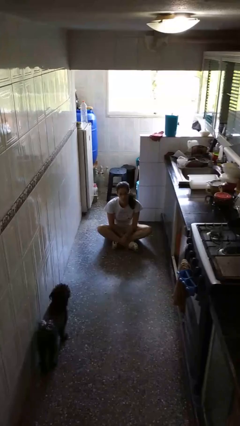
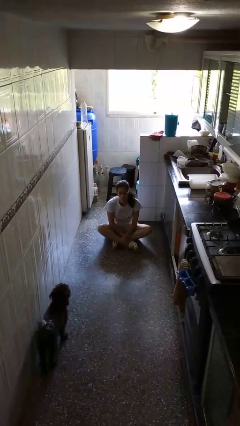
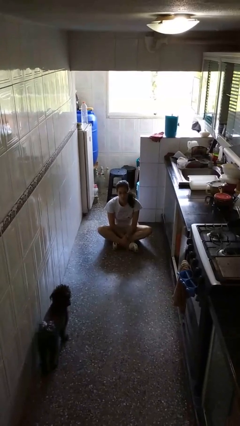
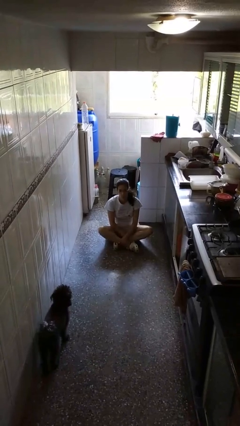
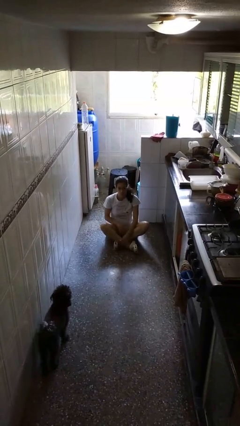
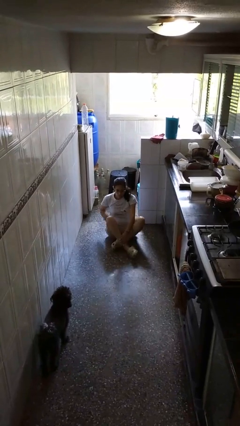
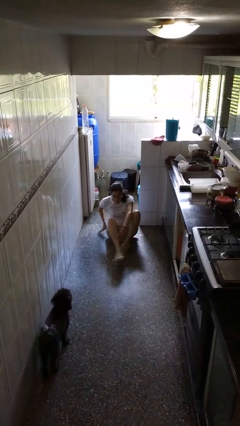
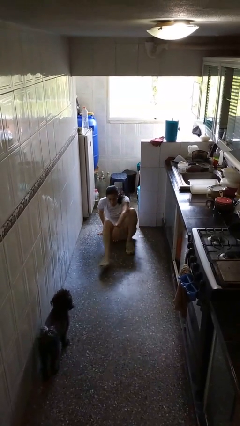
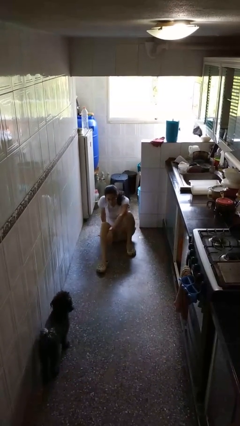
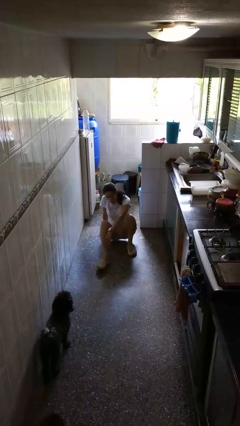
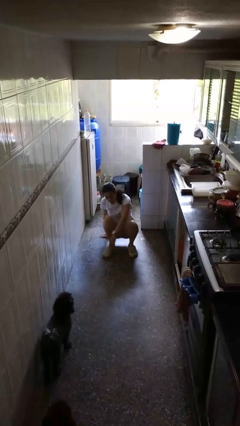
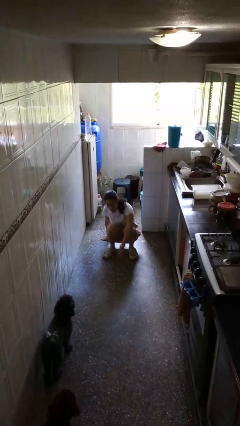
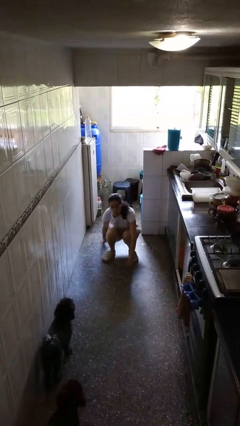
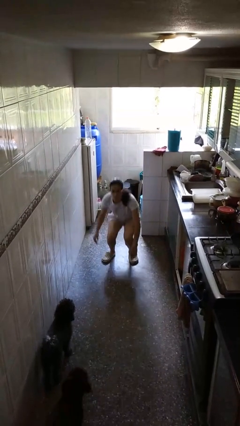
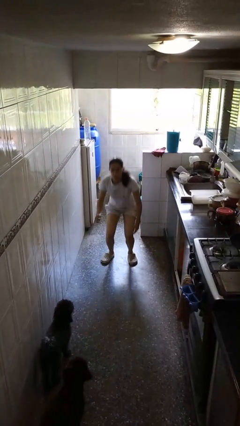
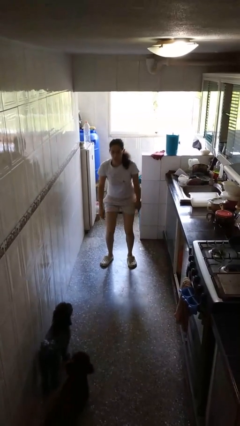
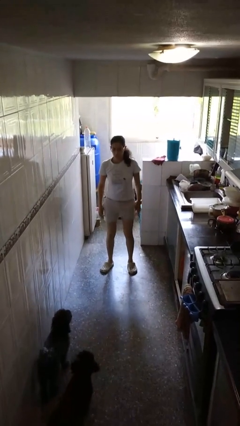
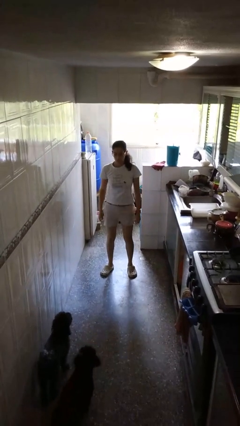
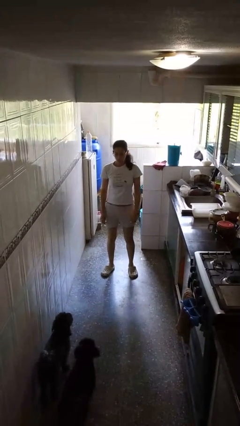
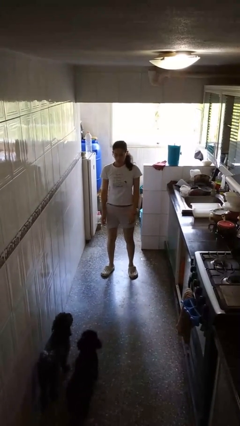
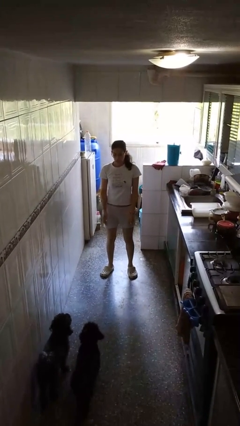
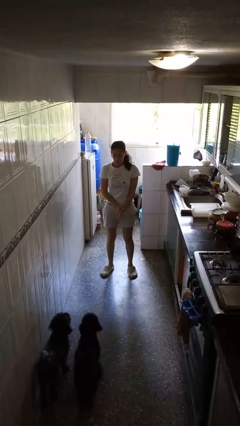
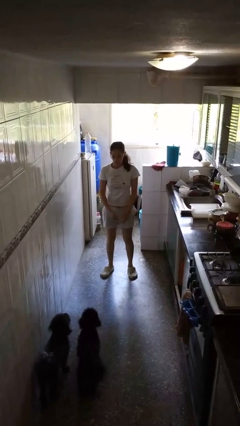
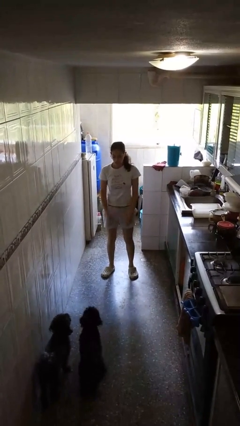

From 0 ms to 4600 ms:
person stands up from floor

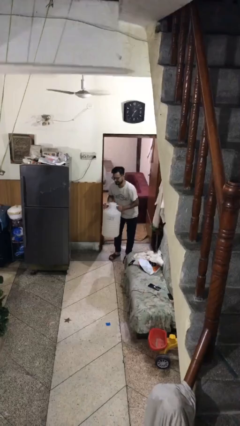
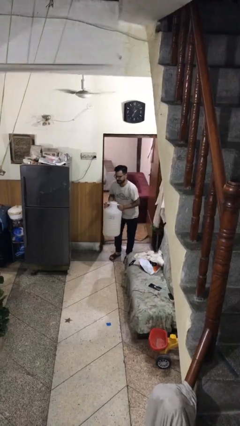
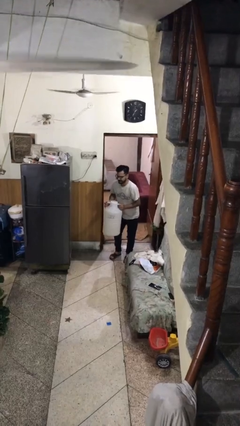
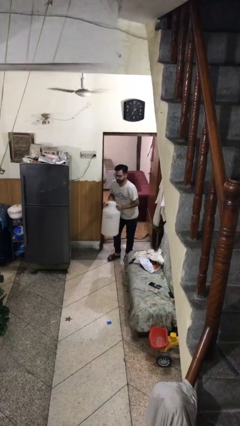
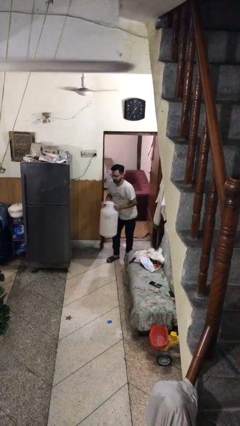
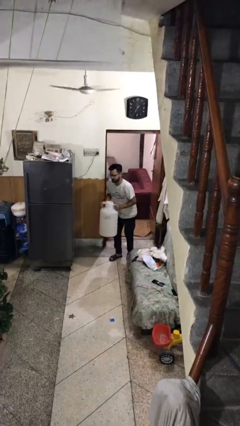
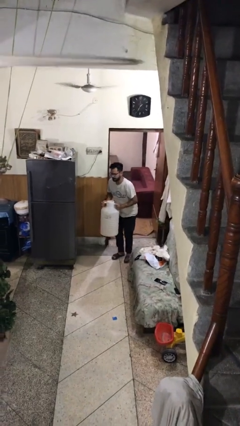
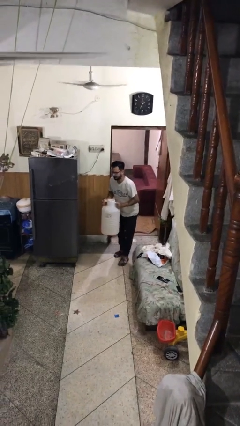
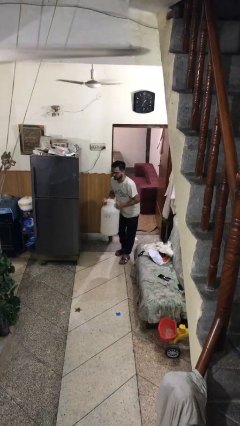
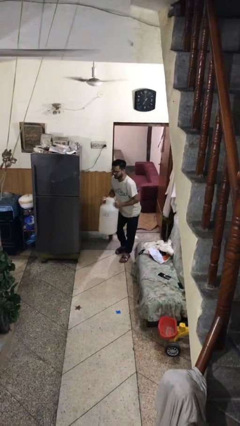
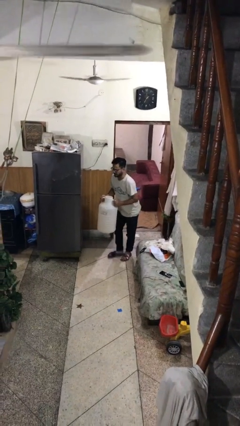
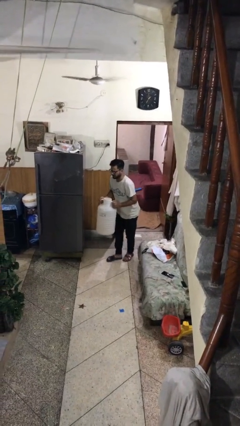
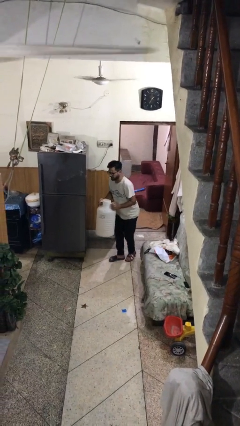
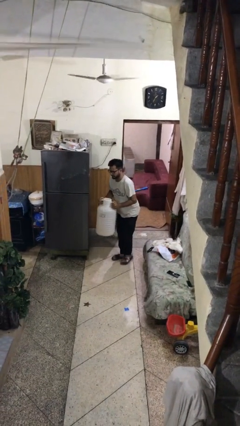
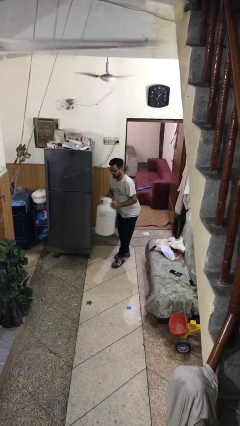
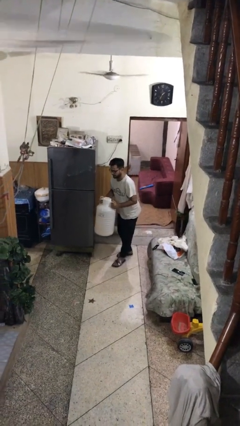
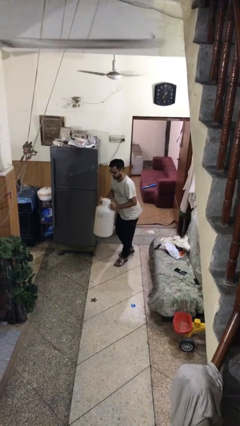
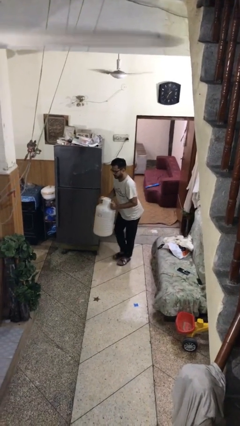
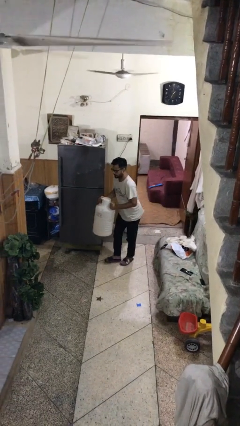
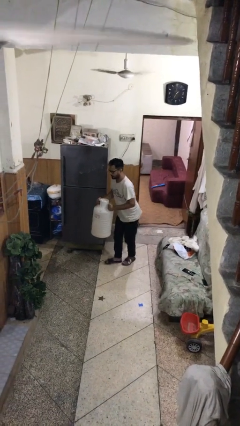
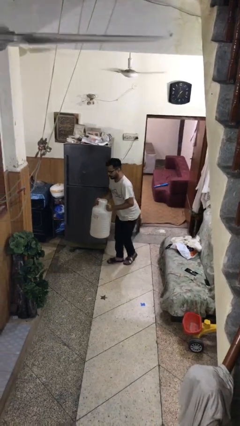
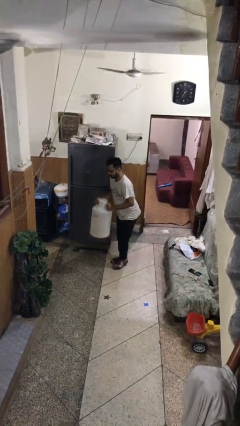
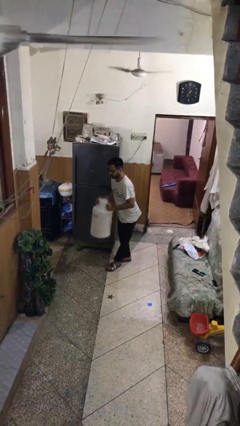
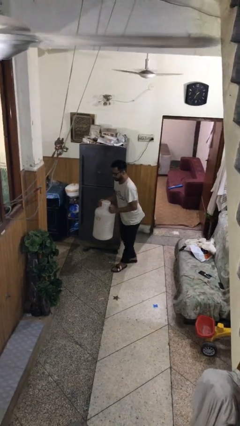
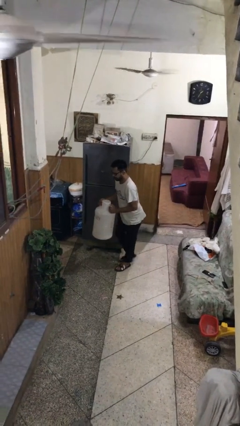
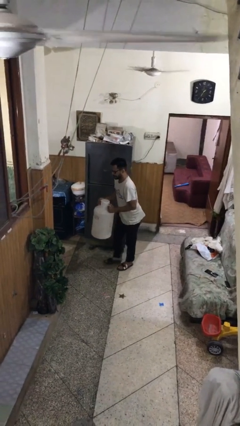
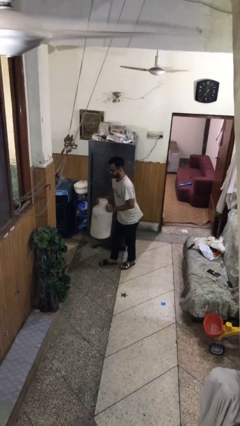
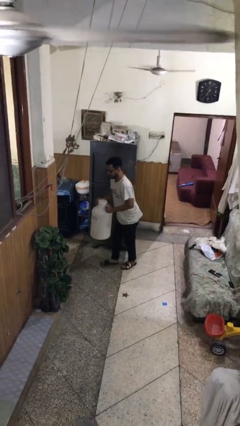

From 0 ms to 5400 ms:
person carries heavy object

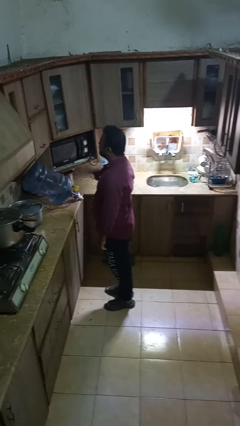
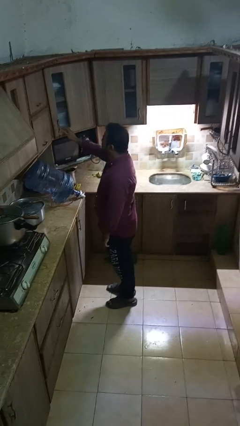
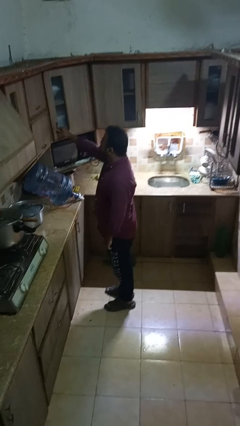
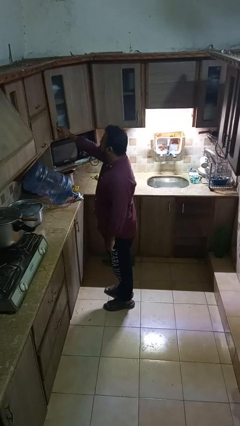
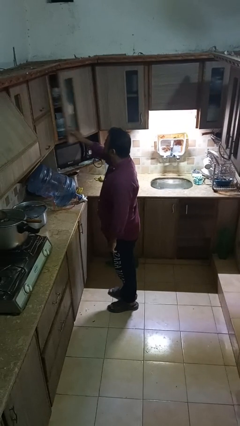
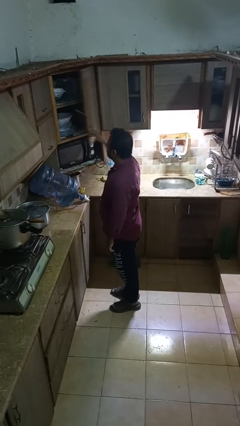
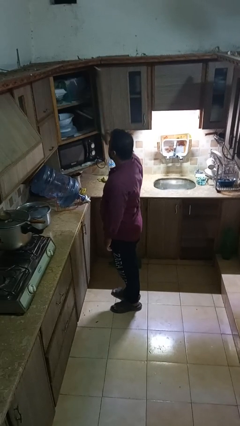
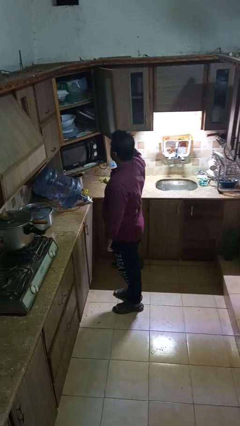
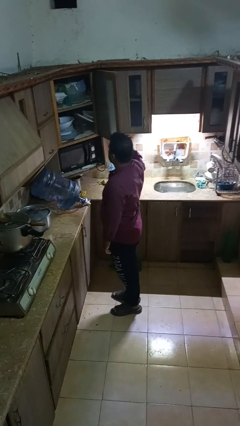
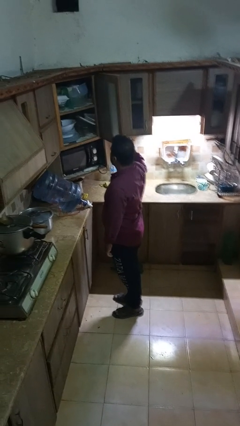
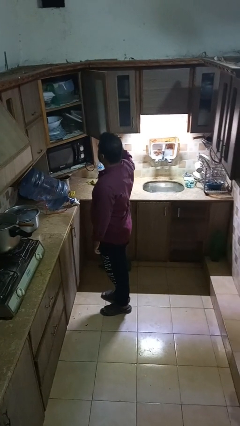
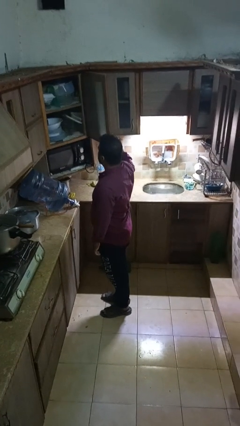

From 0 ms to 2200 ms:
person opens cabinet

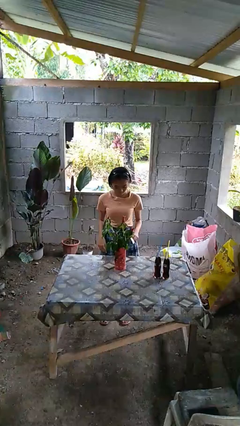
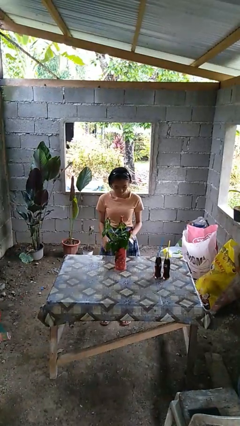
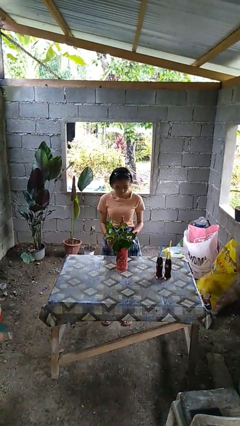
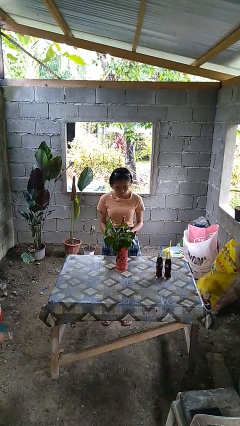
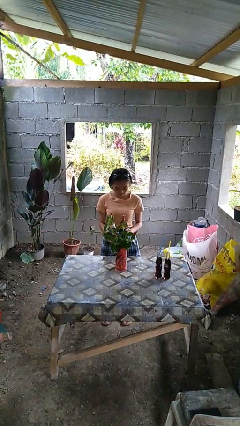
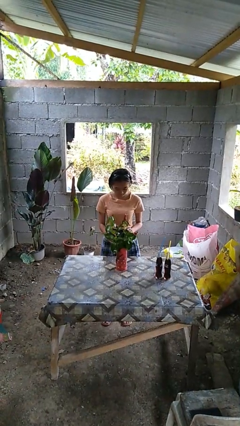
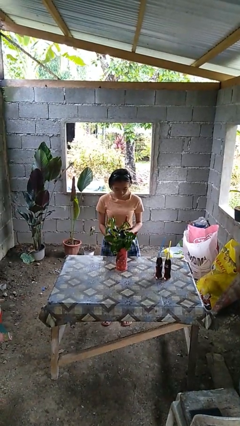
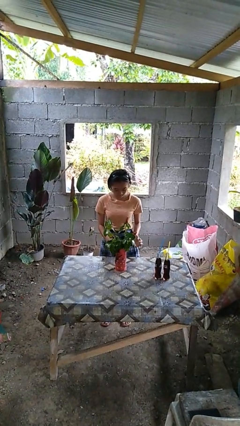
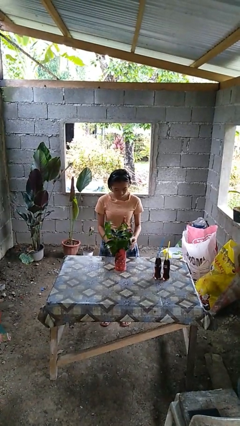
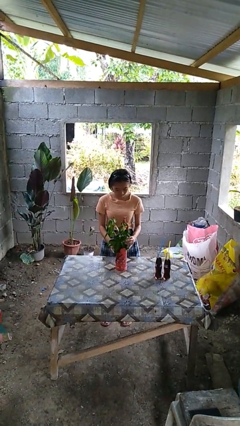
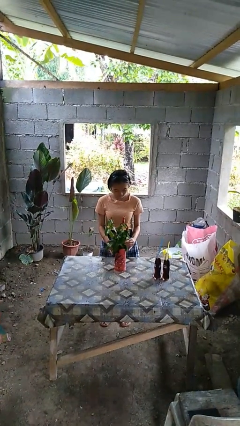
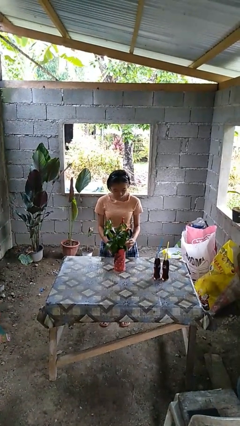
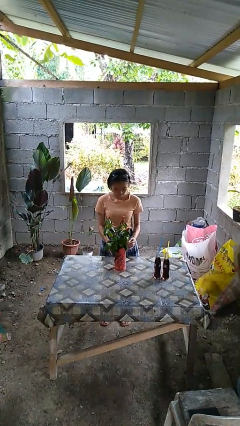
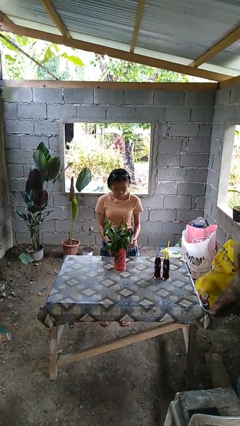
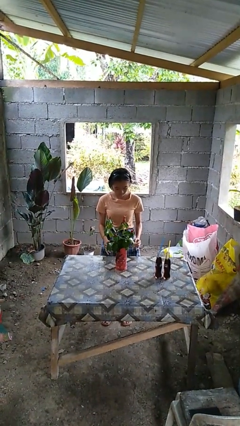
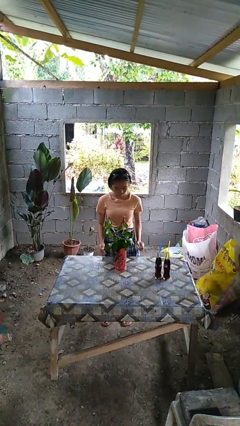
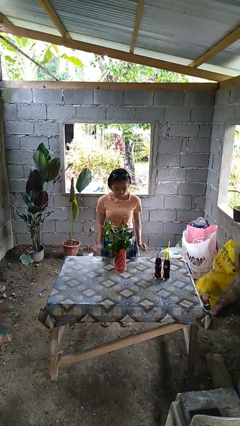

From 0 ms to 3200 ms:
person arranges flowers in vase

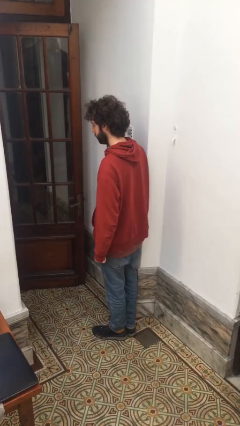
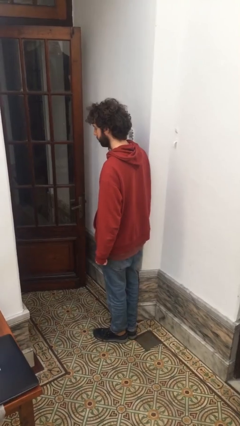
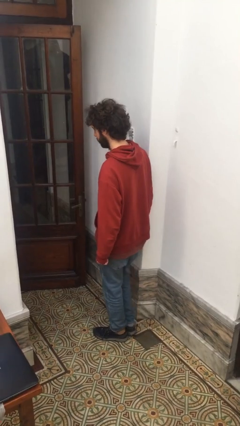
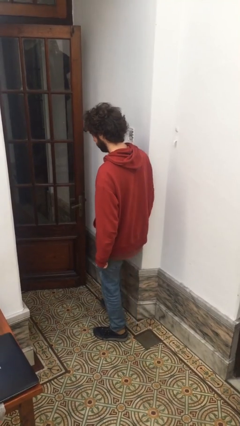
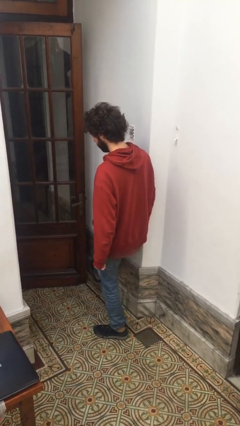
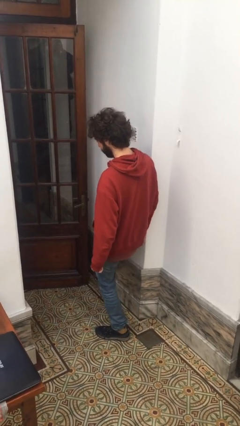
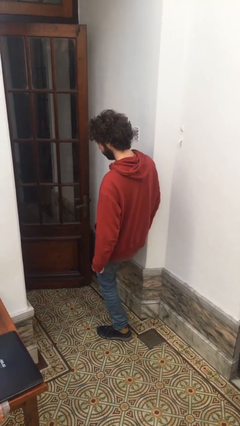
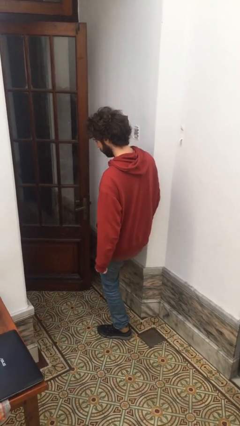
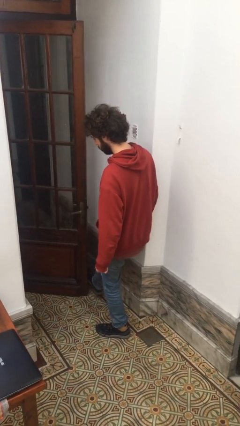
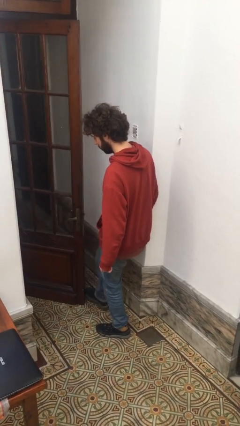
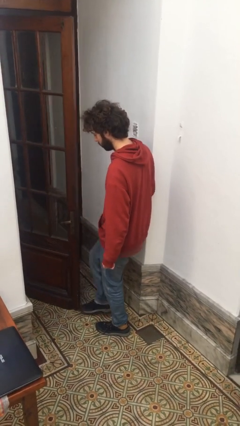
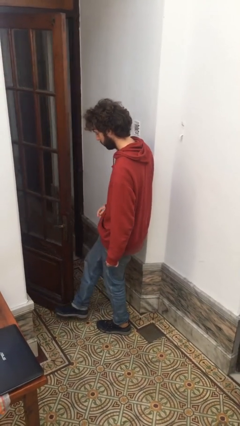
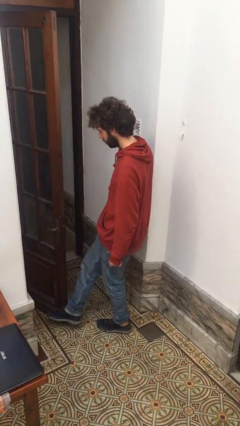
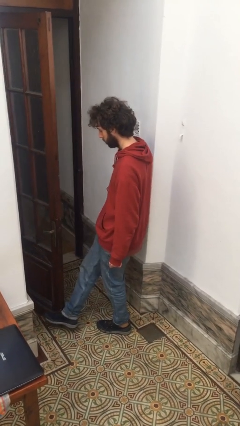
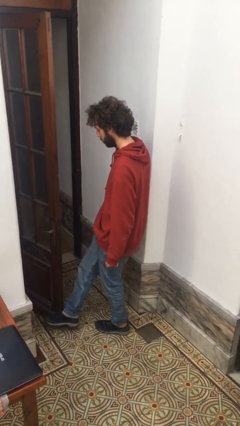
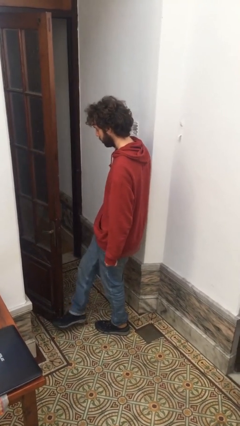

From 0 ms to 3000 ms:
person opens facility door
